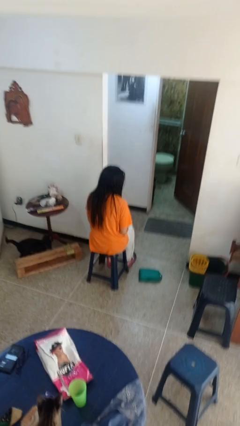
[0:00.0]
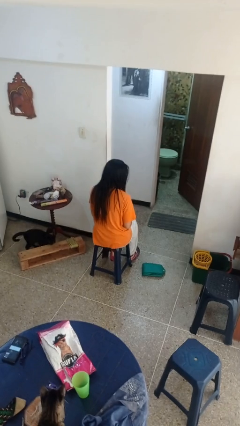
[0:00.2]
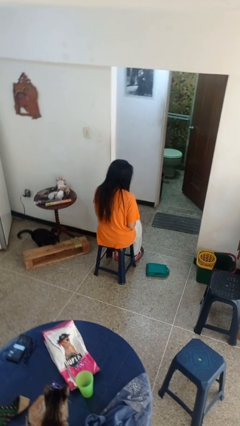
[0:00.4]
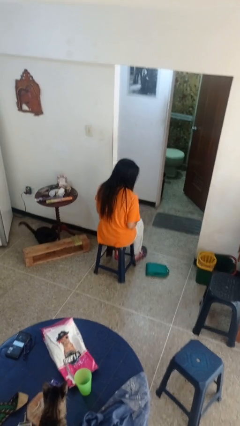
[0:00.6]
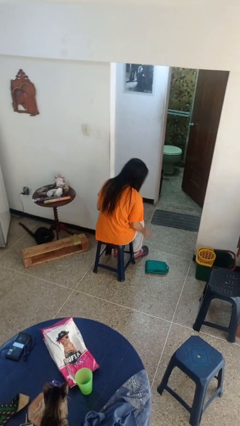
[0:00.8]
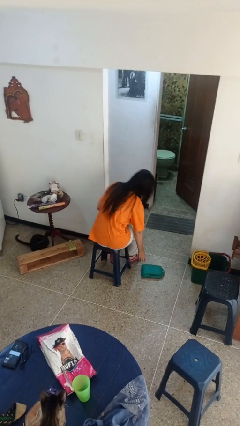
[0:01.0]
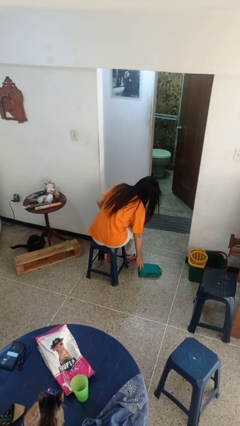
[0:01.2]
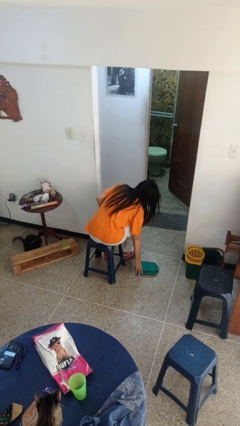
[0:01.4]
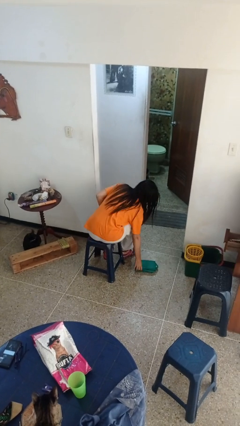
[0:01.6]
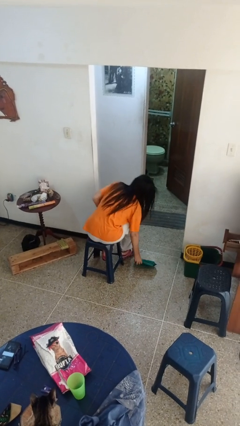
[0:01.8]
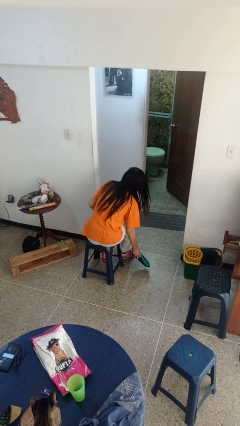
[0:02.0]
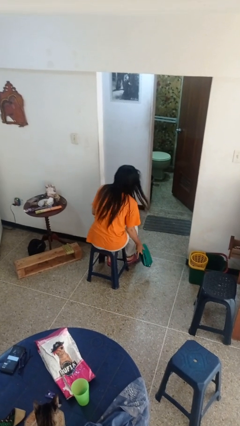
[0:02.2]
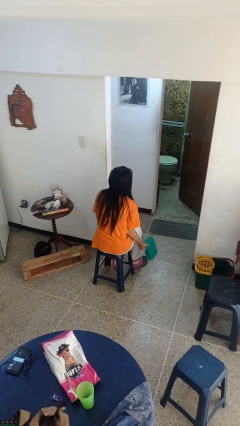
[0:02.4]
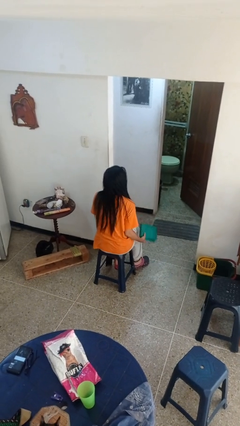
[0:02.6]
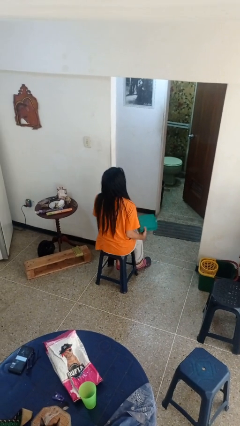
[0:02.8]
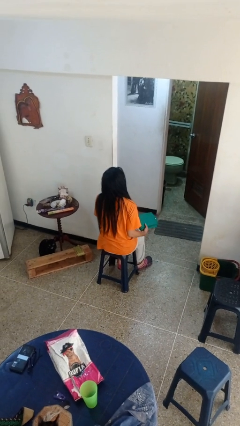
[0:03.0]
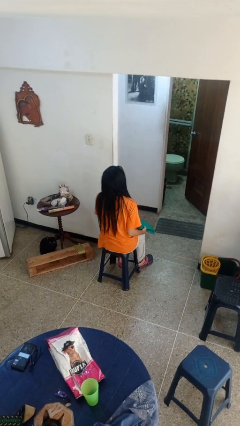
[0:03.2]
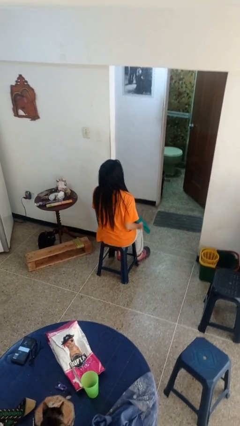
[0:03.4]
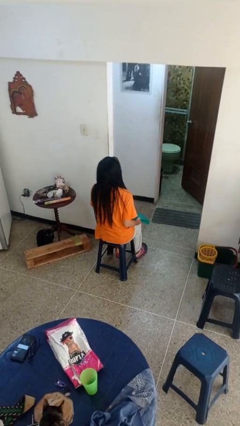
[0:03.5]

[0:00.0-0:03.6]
person picks up object from floor

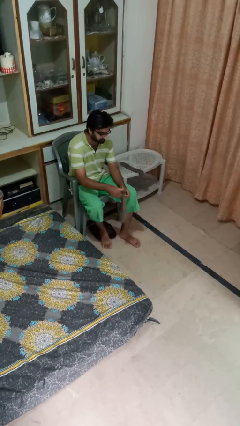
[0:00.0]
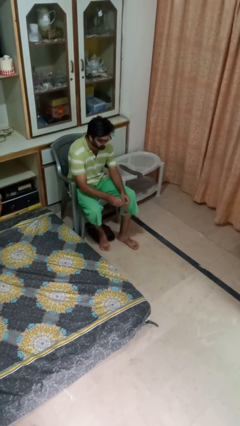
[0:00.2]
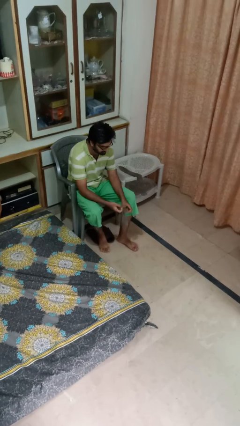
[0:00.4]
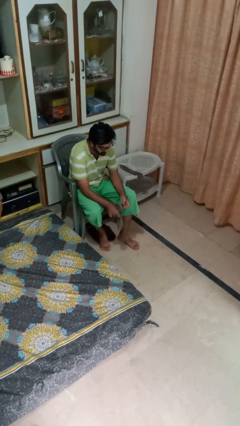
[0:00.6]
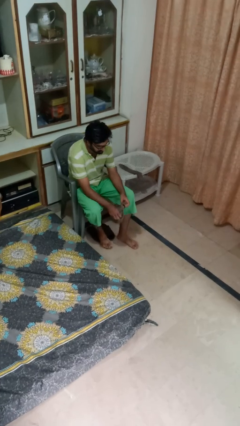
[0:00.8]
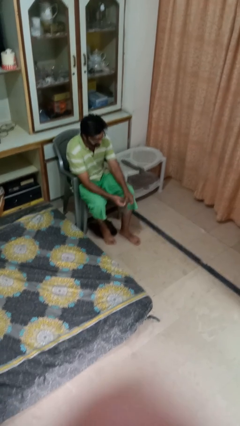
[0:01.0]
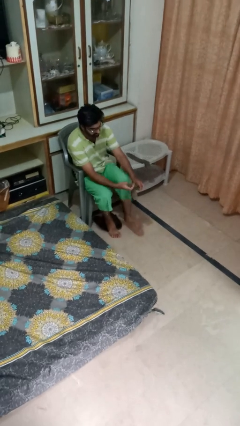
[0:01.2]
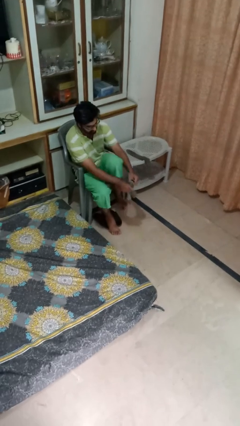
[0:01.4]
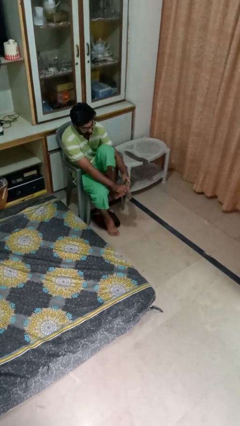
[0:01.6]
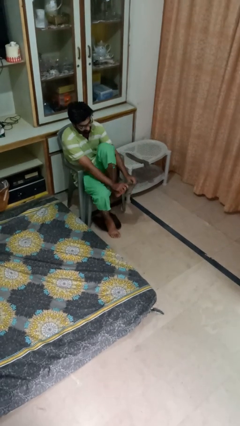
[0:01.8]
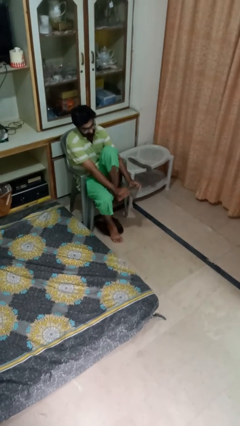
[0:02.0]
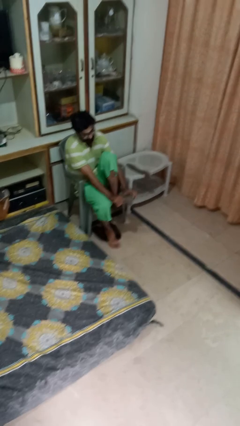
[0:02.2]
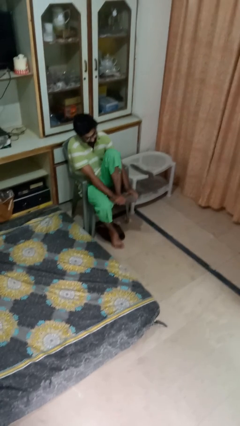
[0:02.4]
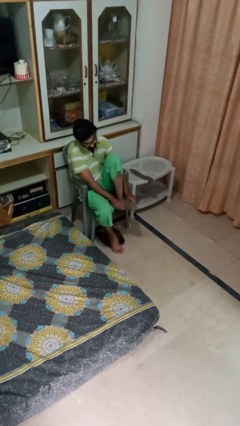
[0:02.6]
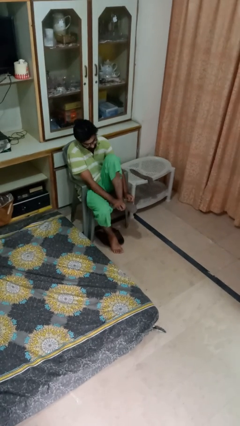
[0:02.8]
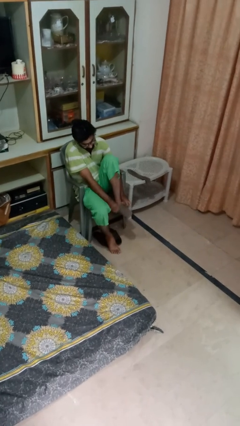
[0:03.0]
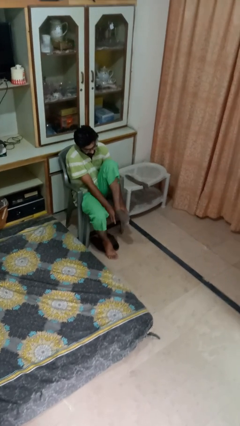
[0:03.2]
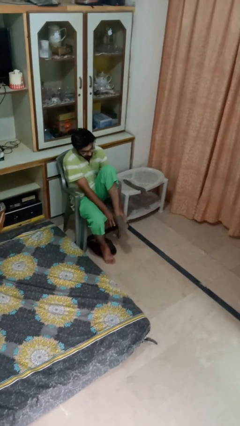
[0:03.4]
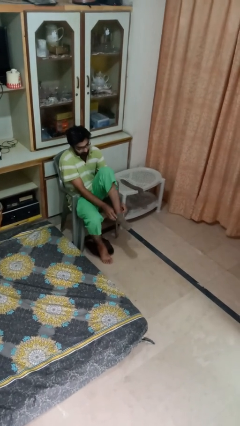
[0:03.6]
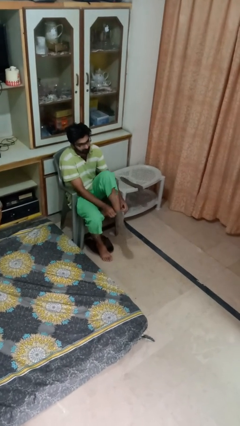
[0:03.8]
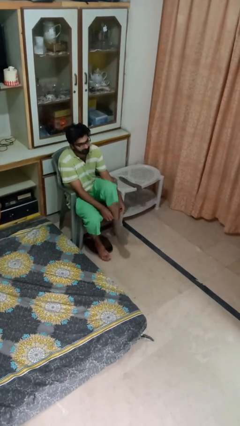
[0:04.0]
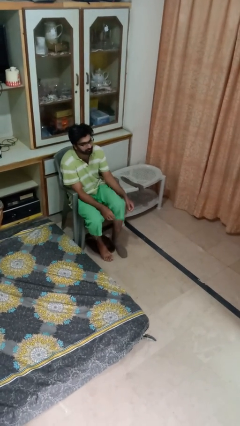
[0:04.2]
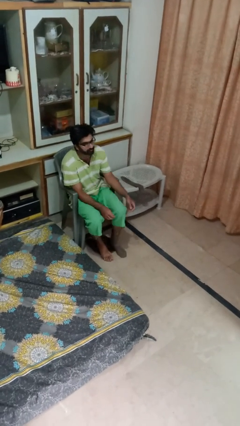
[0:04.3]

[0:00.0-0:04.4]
person puts on socks

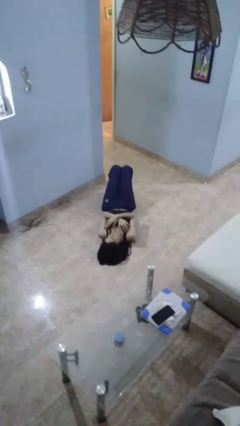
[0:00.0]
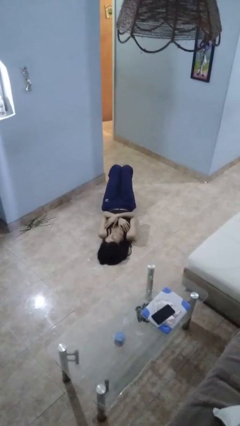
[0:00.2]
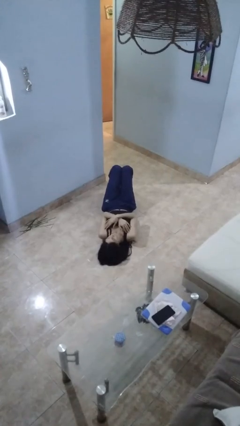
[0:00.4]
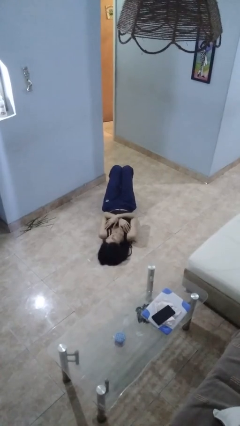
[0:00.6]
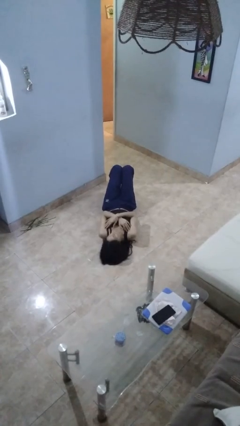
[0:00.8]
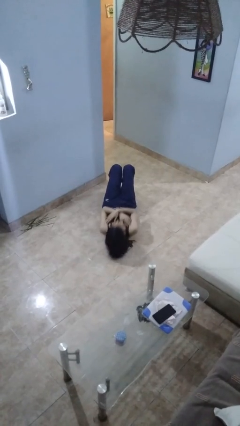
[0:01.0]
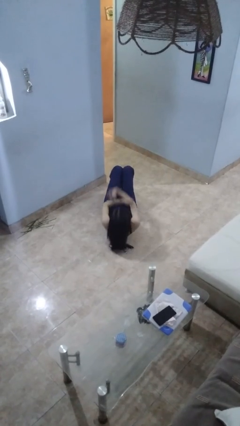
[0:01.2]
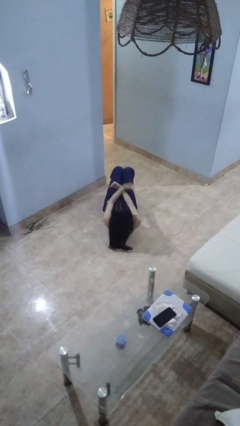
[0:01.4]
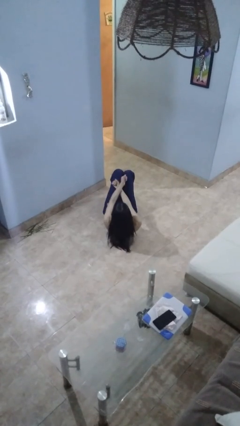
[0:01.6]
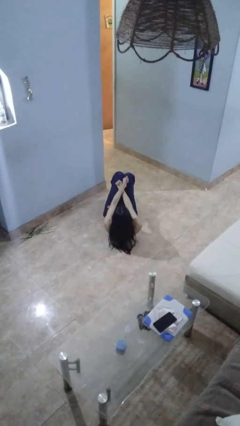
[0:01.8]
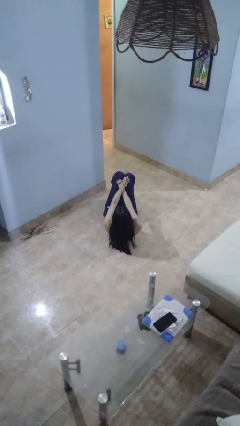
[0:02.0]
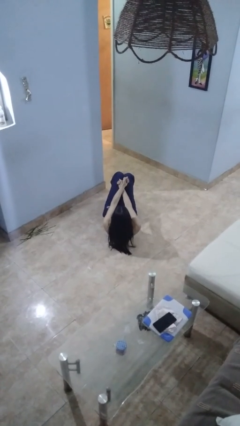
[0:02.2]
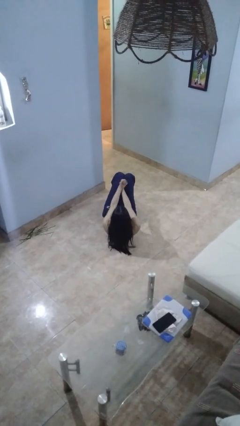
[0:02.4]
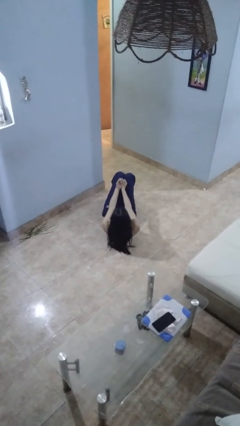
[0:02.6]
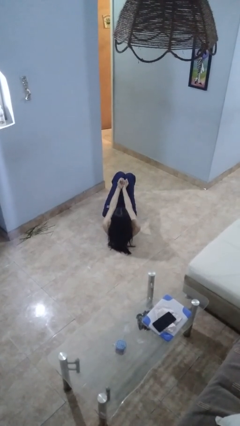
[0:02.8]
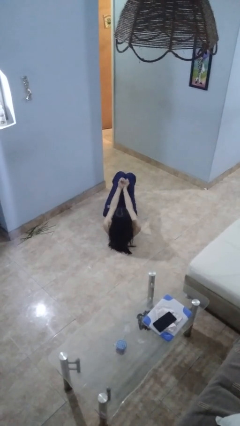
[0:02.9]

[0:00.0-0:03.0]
person exercises with situp

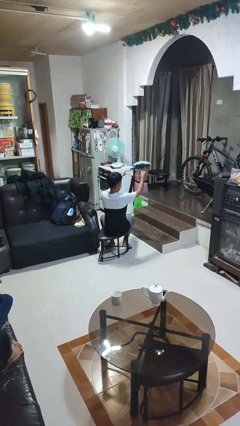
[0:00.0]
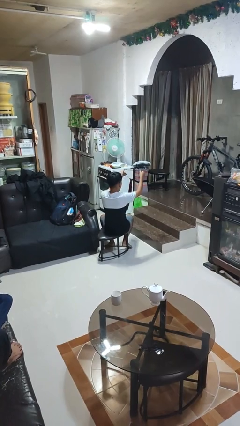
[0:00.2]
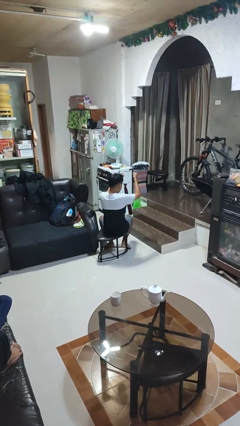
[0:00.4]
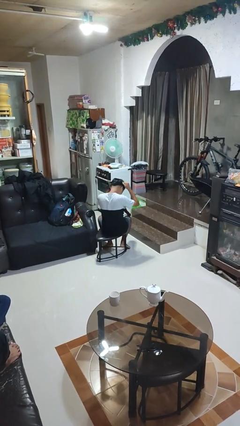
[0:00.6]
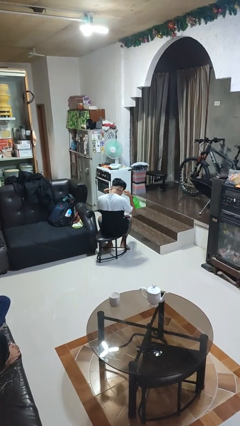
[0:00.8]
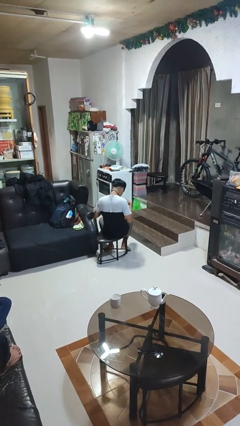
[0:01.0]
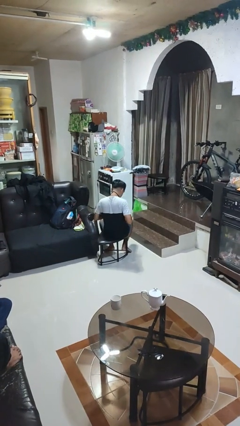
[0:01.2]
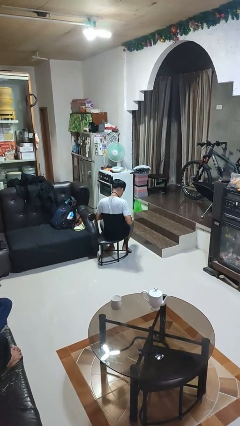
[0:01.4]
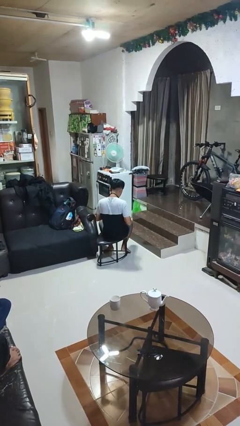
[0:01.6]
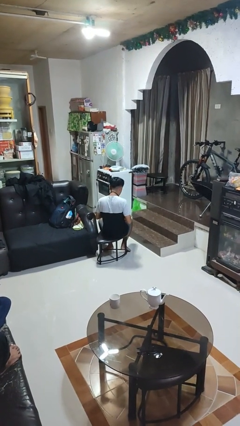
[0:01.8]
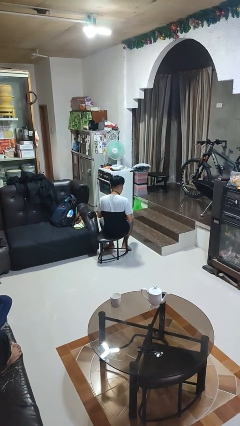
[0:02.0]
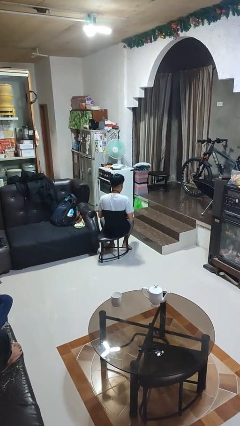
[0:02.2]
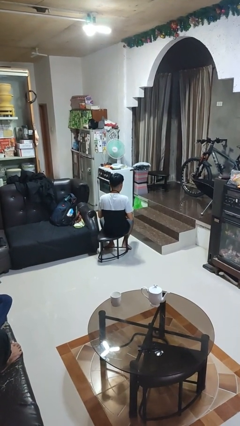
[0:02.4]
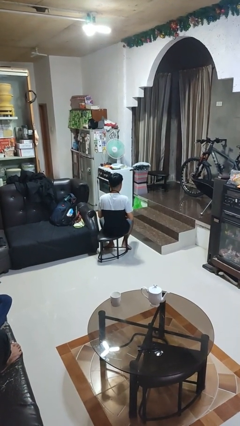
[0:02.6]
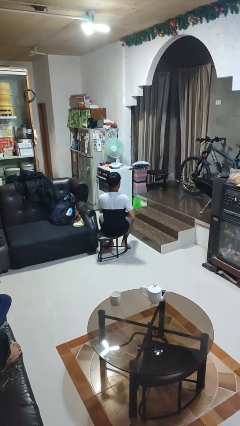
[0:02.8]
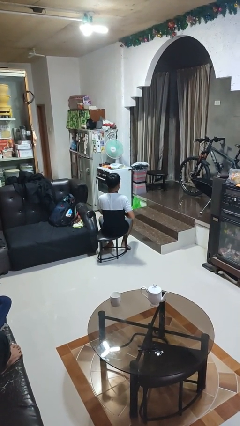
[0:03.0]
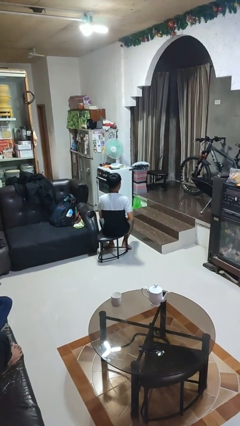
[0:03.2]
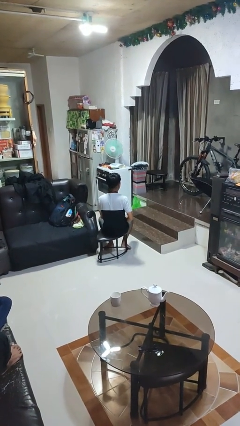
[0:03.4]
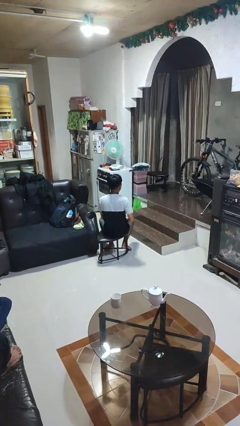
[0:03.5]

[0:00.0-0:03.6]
person puts on necktie

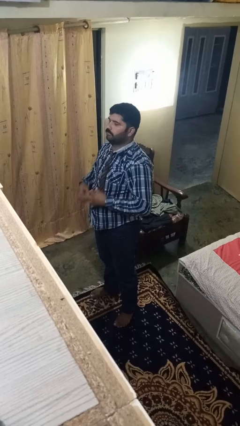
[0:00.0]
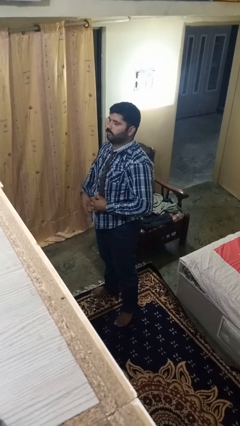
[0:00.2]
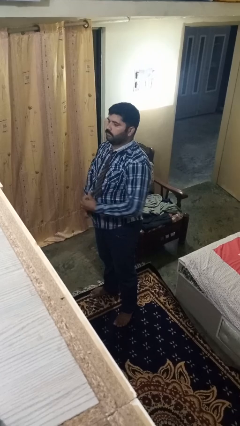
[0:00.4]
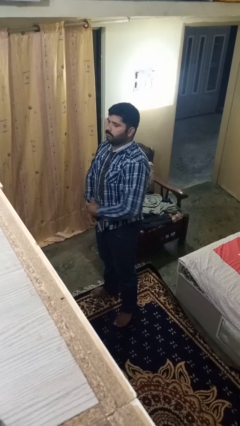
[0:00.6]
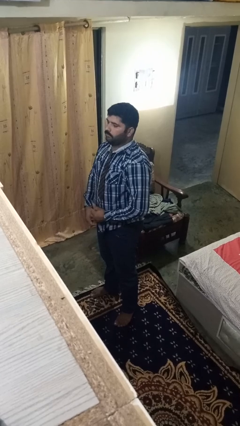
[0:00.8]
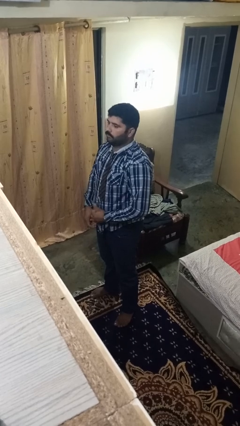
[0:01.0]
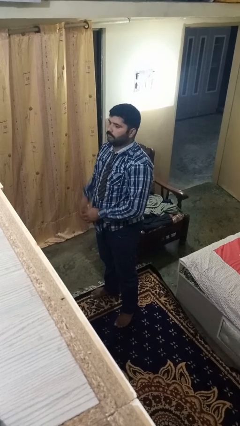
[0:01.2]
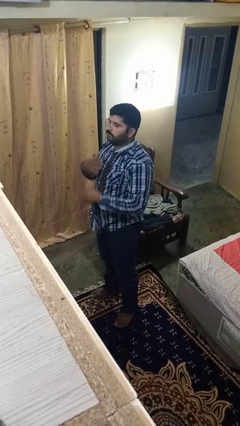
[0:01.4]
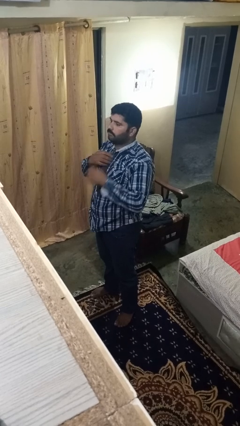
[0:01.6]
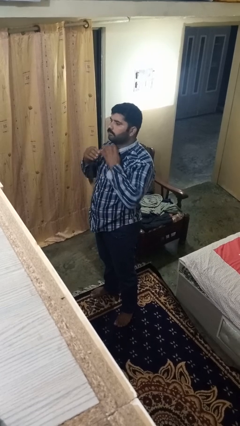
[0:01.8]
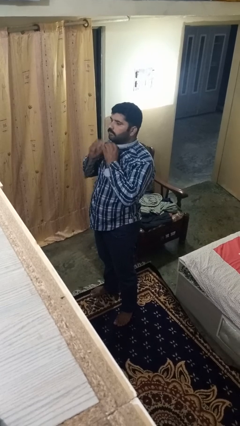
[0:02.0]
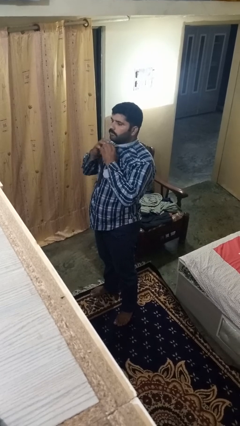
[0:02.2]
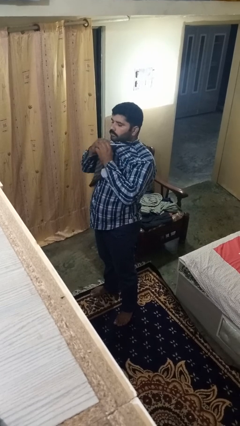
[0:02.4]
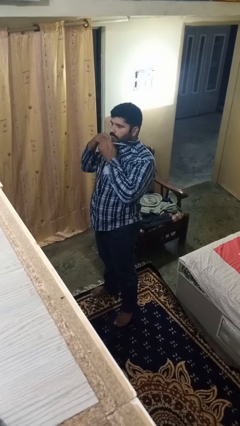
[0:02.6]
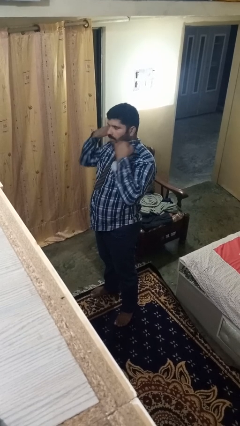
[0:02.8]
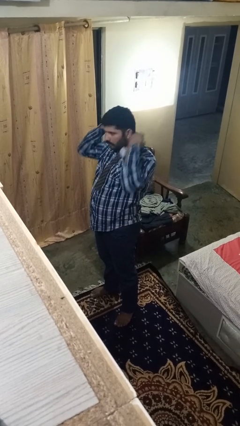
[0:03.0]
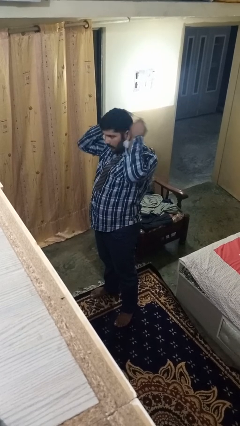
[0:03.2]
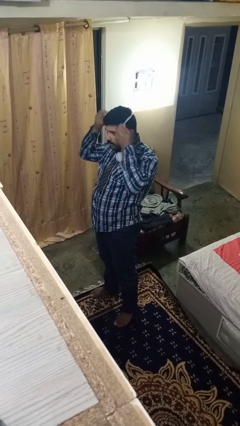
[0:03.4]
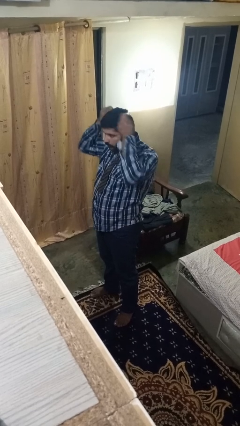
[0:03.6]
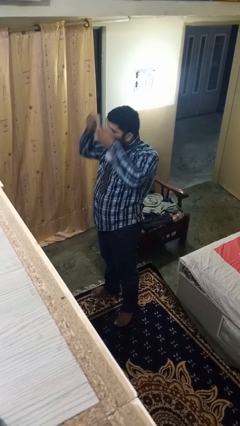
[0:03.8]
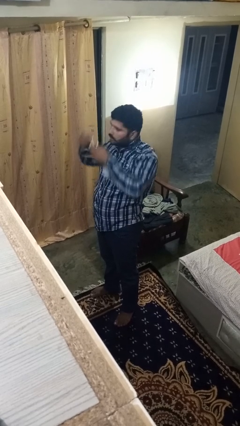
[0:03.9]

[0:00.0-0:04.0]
person takes off necktie
